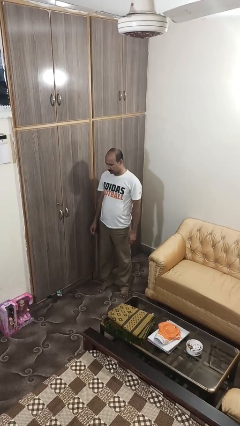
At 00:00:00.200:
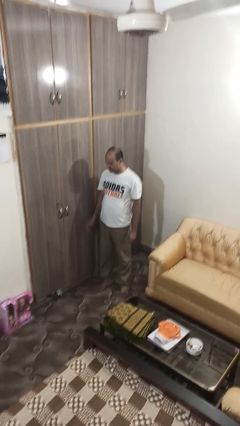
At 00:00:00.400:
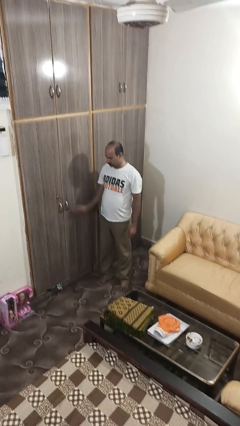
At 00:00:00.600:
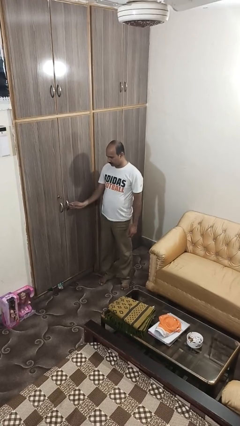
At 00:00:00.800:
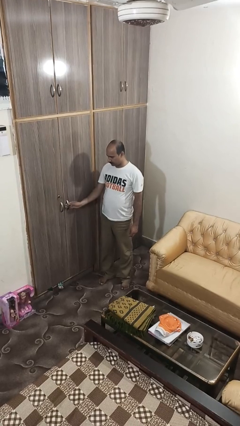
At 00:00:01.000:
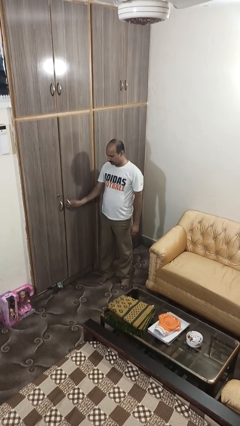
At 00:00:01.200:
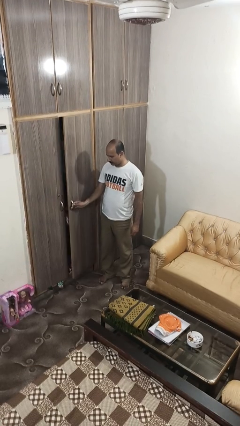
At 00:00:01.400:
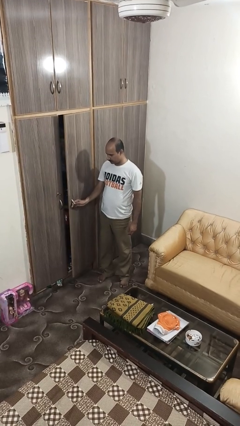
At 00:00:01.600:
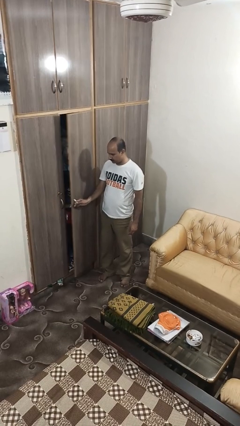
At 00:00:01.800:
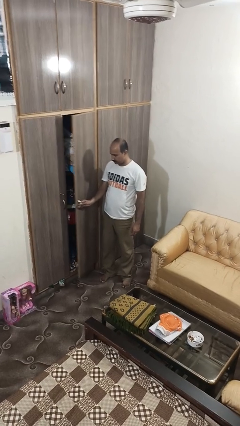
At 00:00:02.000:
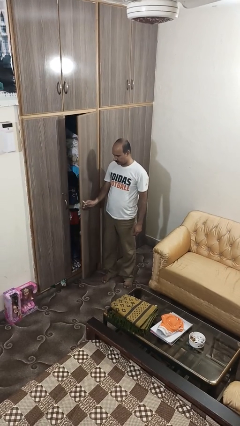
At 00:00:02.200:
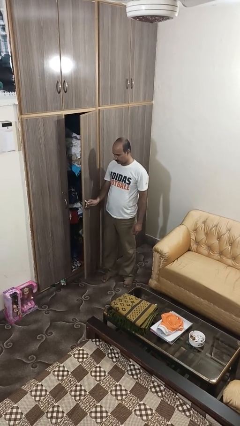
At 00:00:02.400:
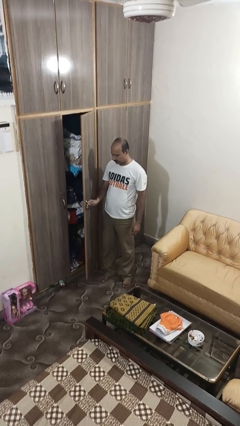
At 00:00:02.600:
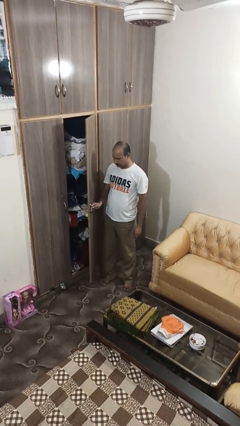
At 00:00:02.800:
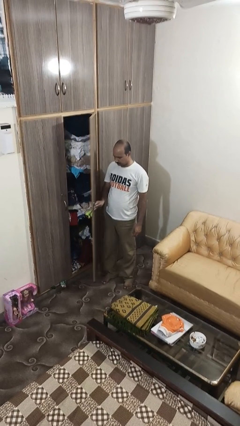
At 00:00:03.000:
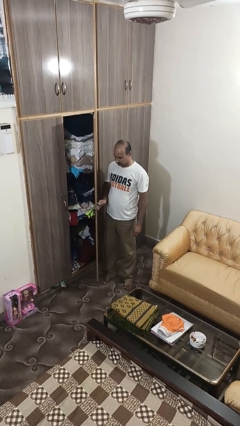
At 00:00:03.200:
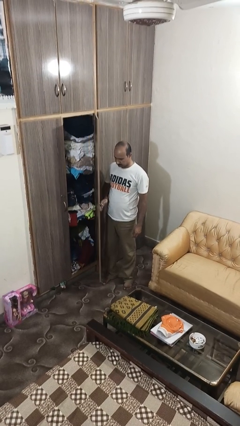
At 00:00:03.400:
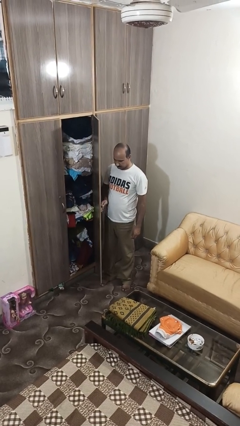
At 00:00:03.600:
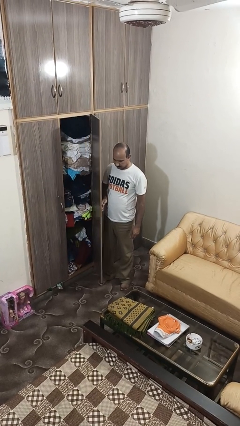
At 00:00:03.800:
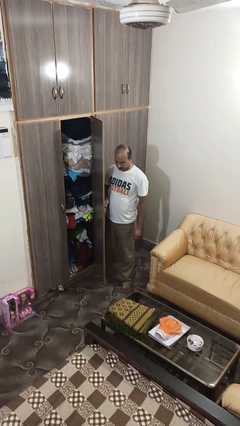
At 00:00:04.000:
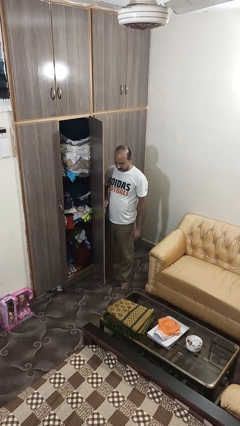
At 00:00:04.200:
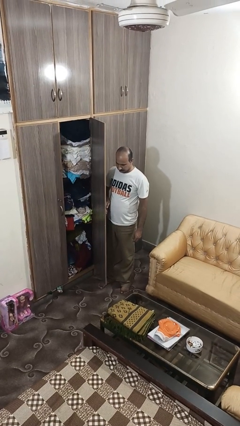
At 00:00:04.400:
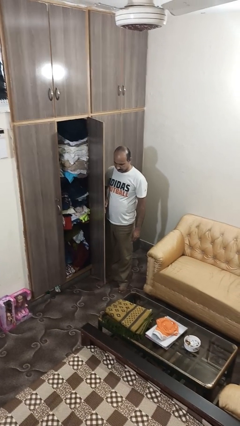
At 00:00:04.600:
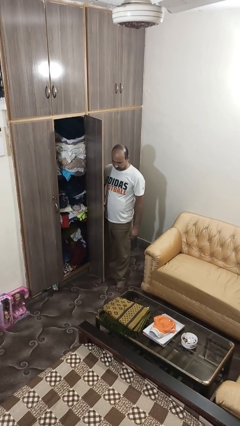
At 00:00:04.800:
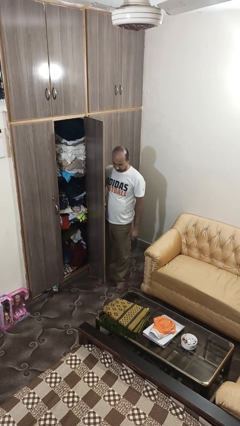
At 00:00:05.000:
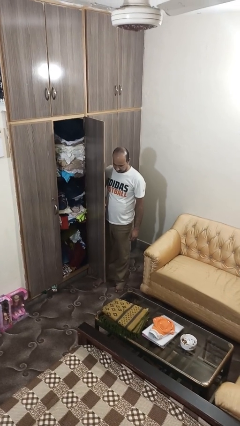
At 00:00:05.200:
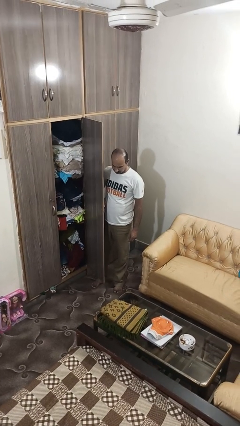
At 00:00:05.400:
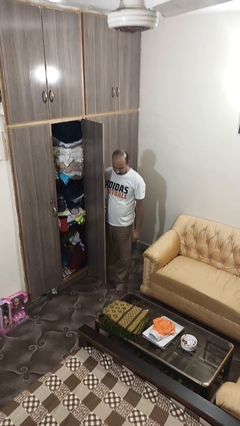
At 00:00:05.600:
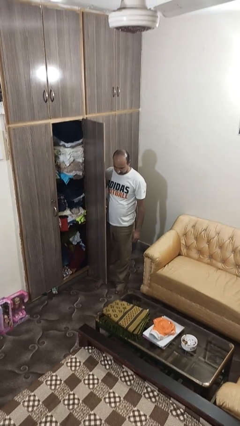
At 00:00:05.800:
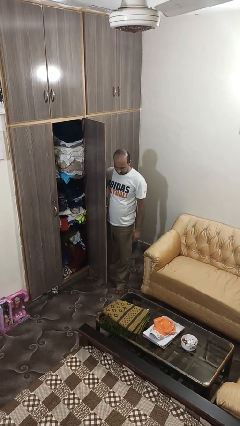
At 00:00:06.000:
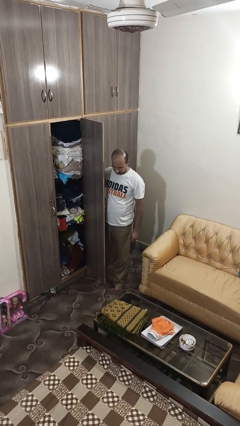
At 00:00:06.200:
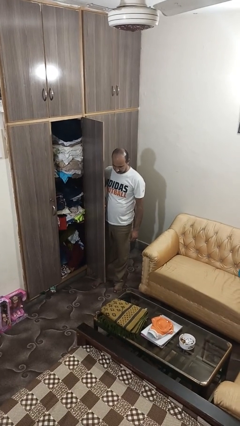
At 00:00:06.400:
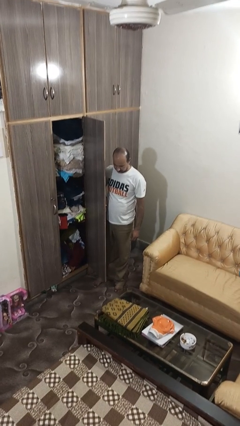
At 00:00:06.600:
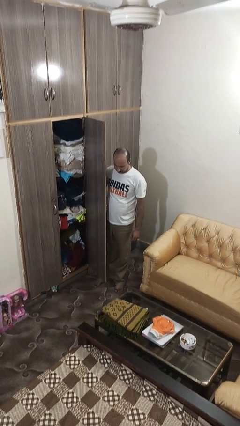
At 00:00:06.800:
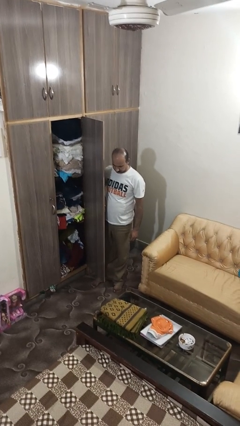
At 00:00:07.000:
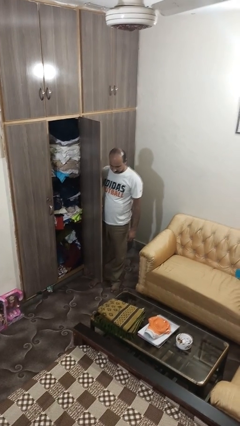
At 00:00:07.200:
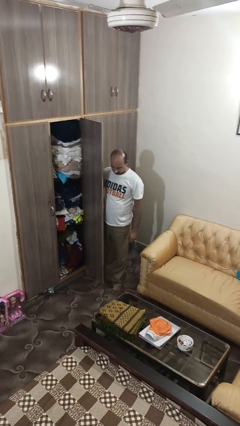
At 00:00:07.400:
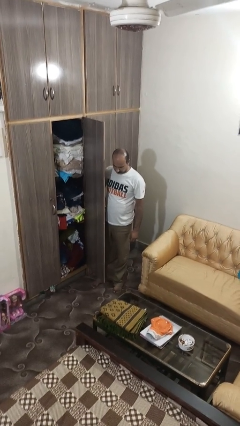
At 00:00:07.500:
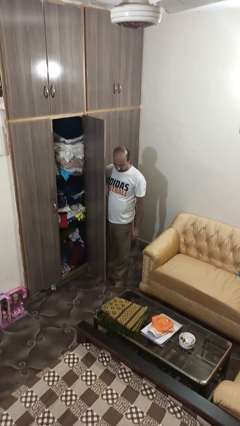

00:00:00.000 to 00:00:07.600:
person opens closet door

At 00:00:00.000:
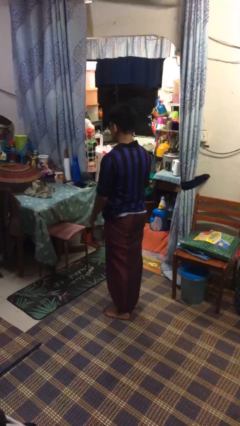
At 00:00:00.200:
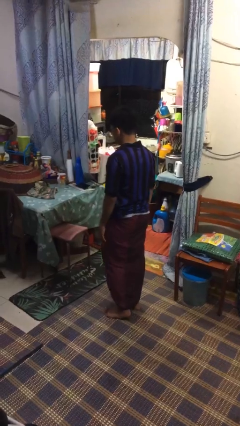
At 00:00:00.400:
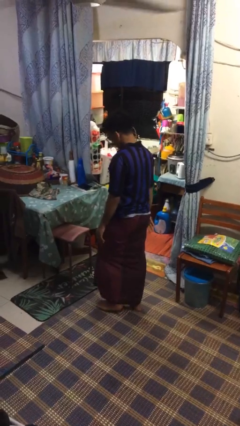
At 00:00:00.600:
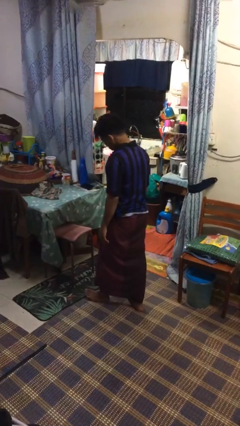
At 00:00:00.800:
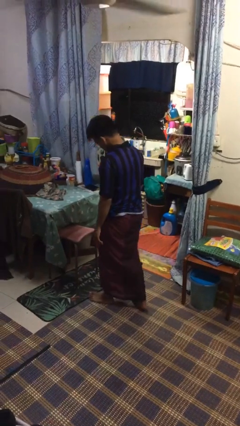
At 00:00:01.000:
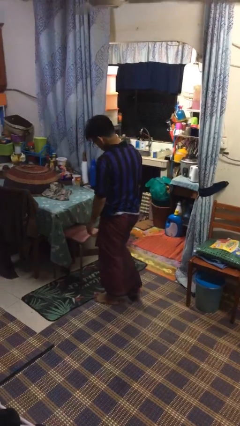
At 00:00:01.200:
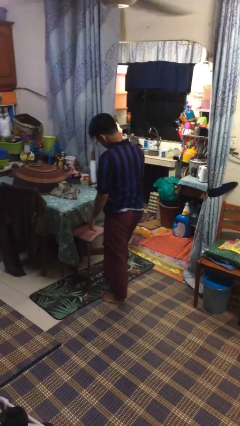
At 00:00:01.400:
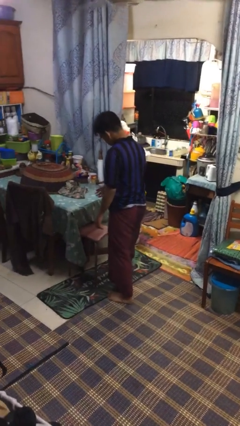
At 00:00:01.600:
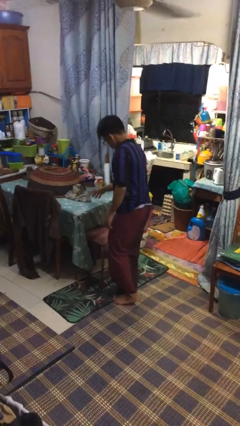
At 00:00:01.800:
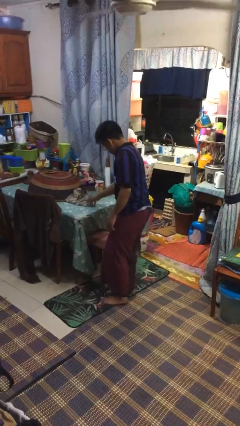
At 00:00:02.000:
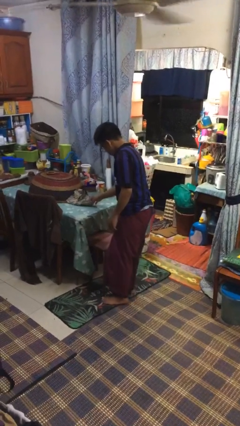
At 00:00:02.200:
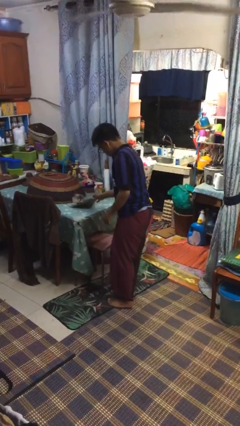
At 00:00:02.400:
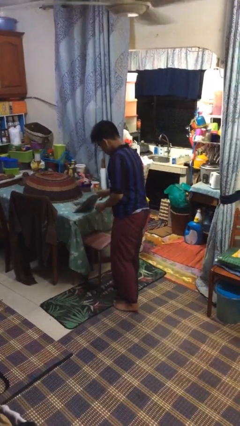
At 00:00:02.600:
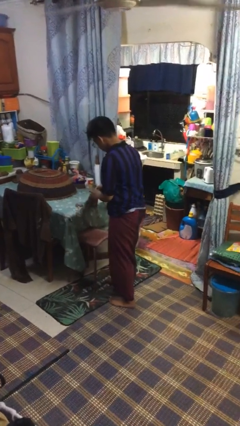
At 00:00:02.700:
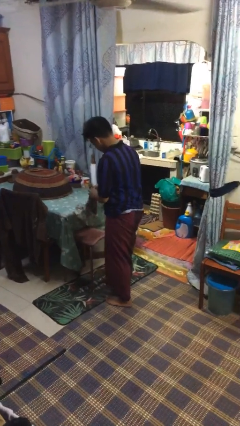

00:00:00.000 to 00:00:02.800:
person picks up object from table

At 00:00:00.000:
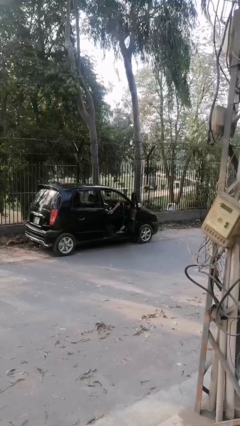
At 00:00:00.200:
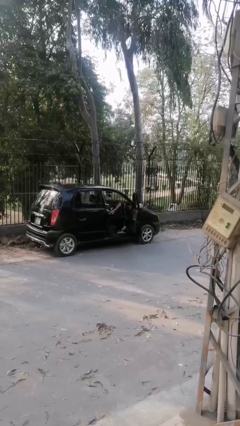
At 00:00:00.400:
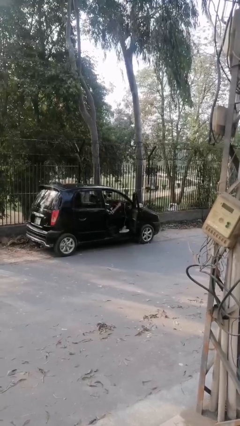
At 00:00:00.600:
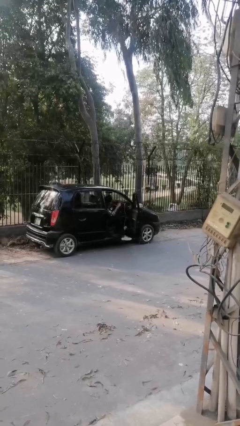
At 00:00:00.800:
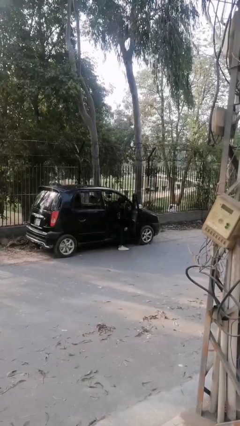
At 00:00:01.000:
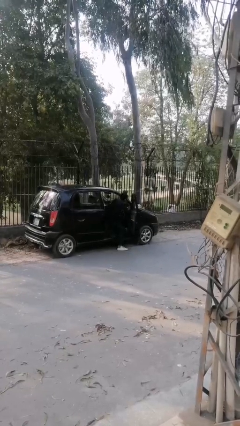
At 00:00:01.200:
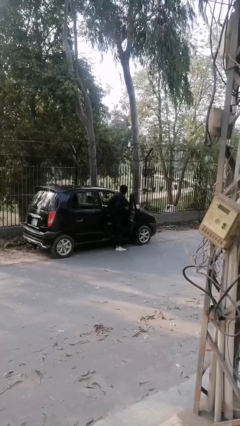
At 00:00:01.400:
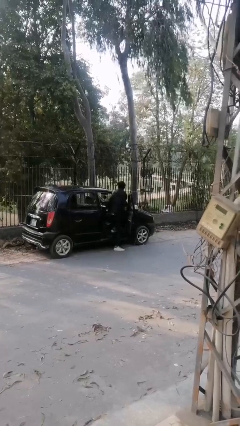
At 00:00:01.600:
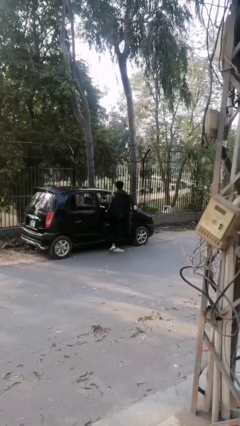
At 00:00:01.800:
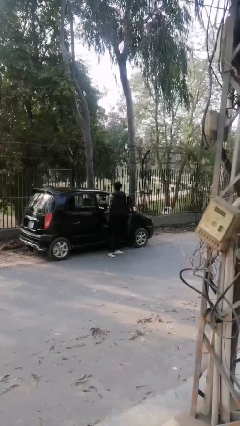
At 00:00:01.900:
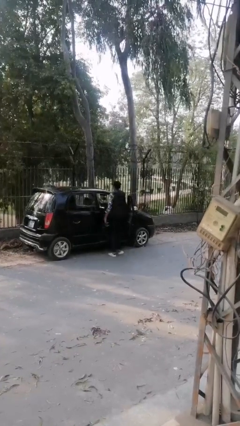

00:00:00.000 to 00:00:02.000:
person exits car

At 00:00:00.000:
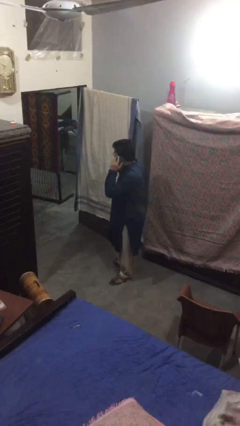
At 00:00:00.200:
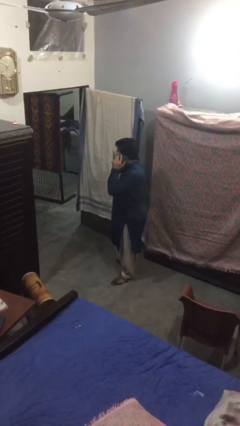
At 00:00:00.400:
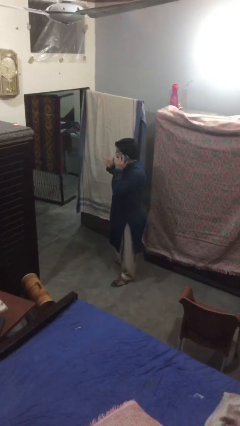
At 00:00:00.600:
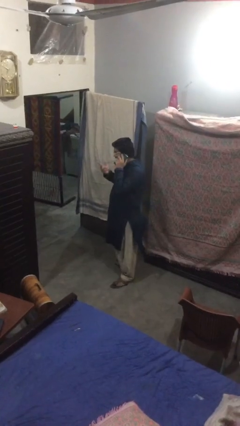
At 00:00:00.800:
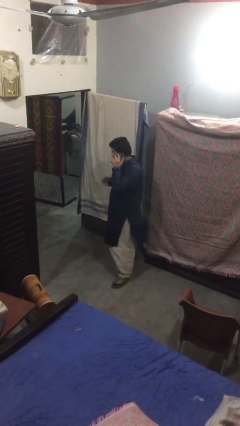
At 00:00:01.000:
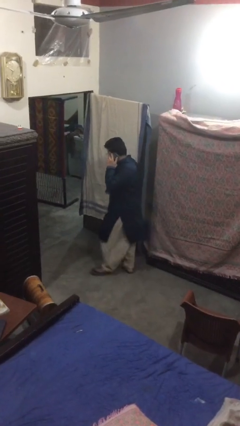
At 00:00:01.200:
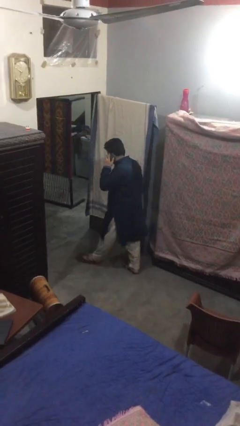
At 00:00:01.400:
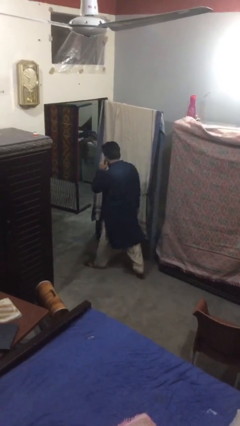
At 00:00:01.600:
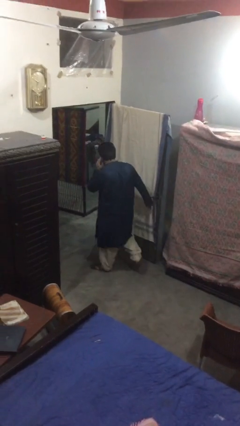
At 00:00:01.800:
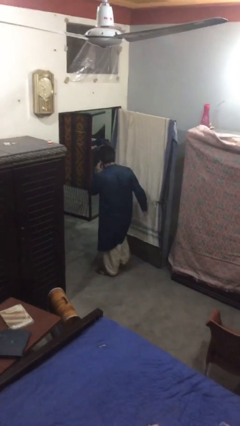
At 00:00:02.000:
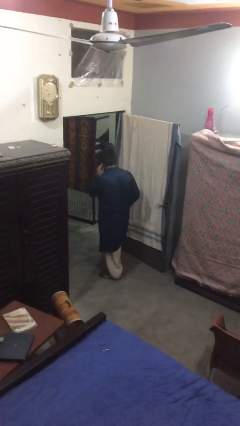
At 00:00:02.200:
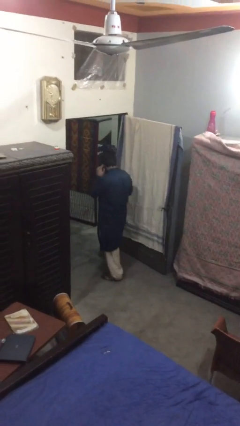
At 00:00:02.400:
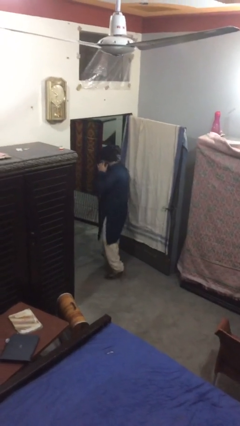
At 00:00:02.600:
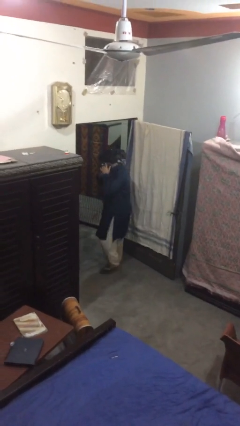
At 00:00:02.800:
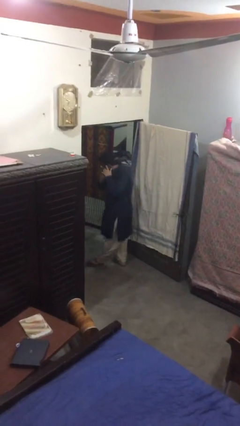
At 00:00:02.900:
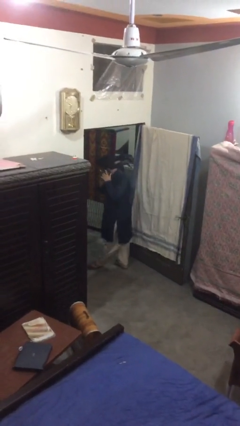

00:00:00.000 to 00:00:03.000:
person exits scene through structure

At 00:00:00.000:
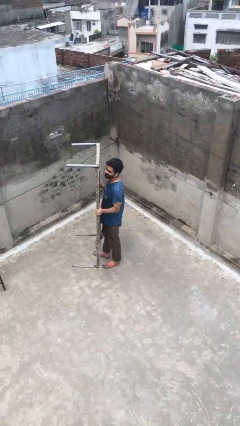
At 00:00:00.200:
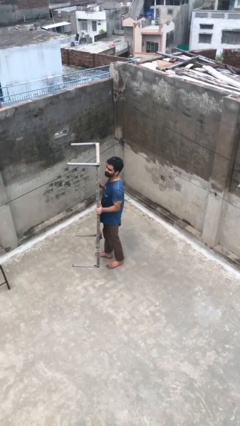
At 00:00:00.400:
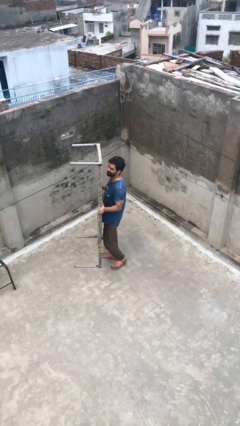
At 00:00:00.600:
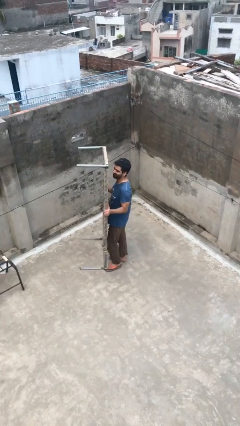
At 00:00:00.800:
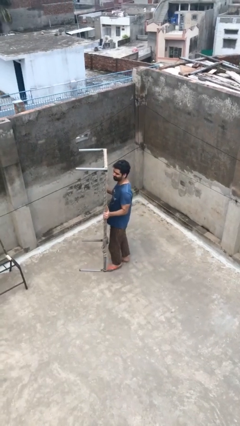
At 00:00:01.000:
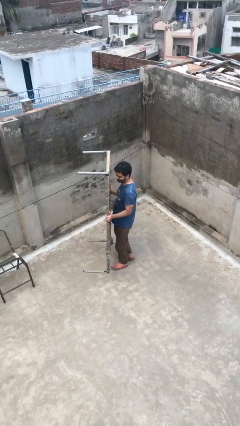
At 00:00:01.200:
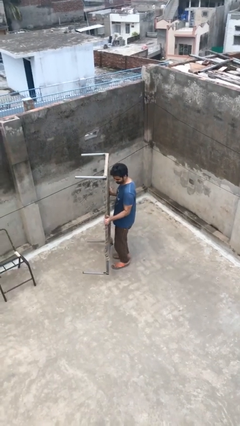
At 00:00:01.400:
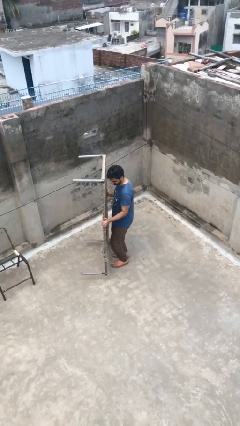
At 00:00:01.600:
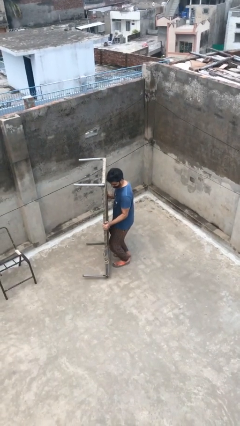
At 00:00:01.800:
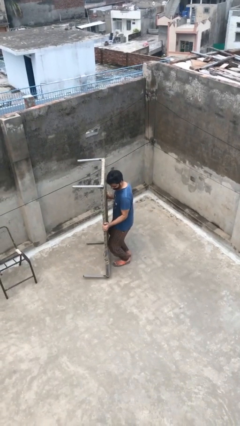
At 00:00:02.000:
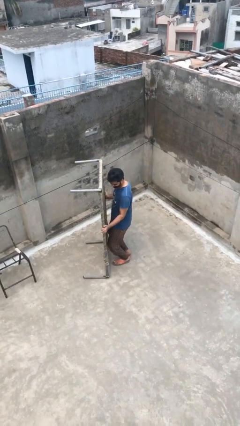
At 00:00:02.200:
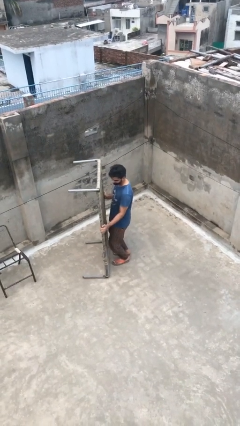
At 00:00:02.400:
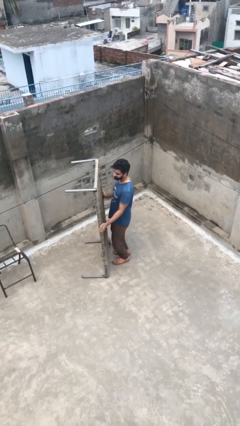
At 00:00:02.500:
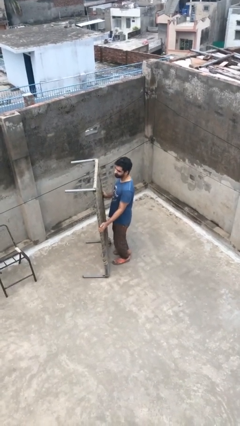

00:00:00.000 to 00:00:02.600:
person puts down object on floor
